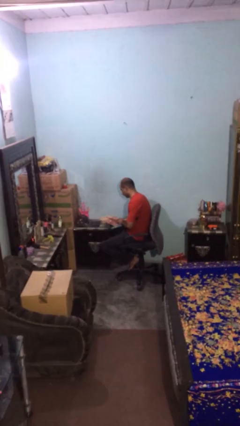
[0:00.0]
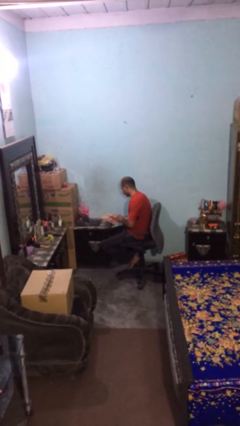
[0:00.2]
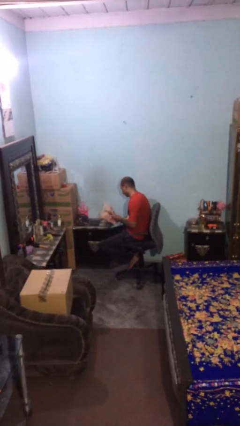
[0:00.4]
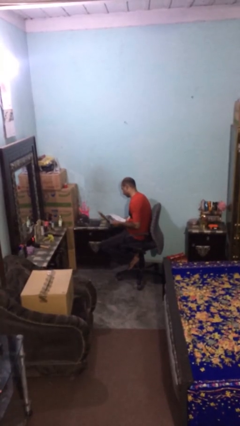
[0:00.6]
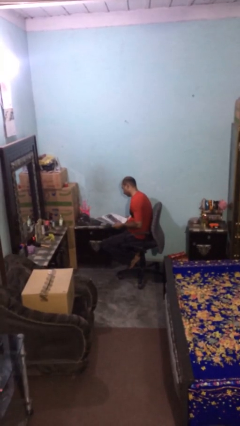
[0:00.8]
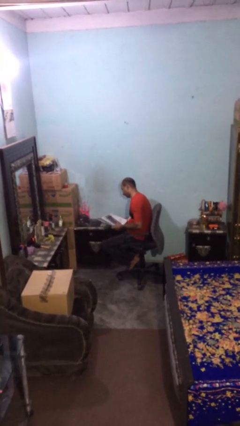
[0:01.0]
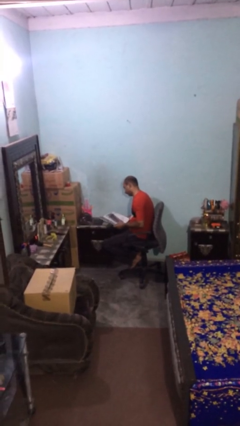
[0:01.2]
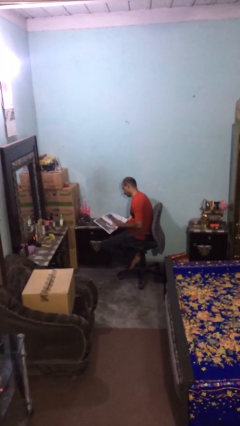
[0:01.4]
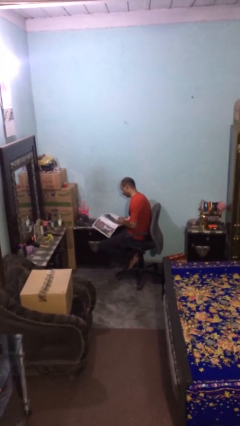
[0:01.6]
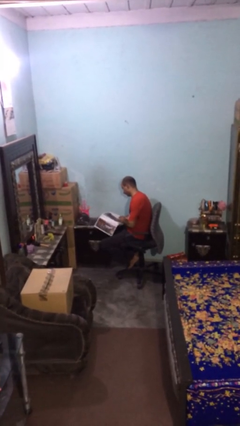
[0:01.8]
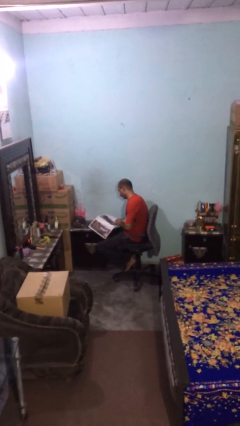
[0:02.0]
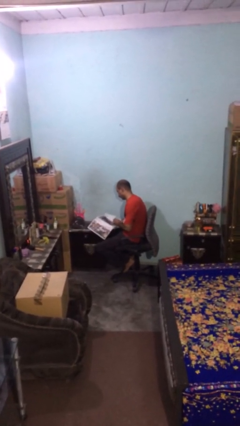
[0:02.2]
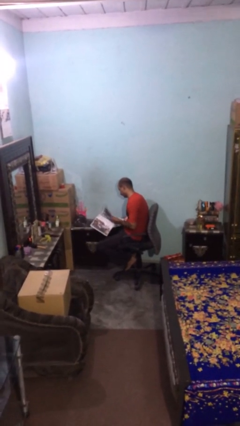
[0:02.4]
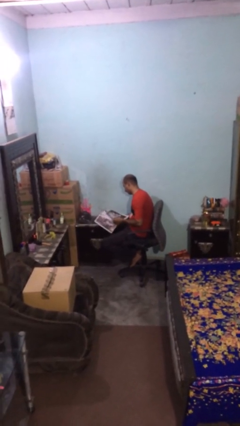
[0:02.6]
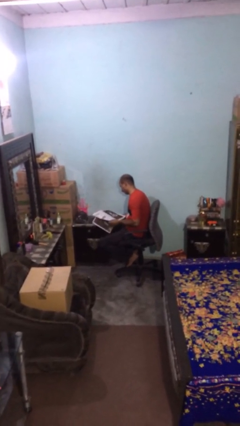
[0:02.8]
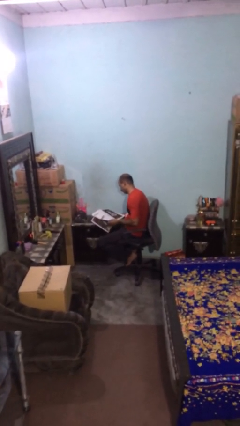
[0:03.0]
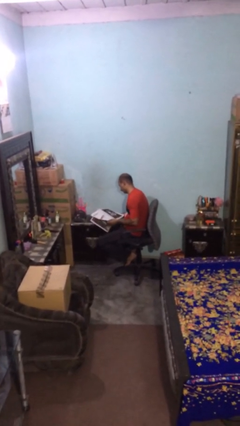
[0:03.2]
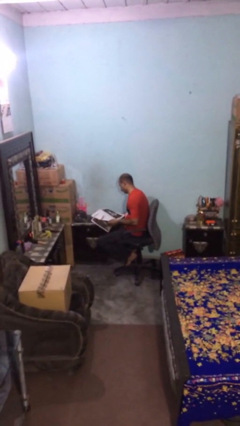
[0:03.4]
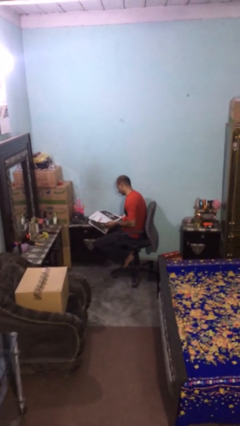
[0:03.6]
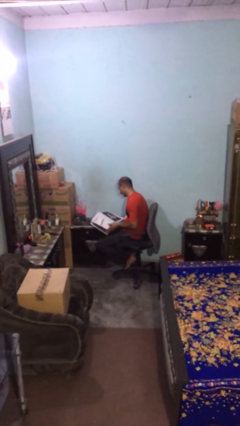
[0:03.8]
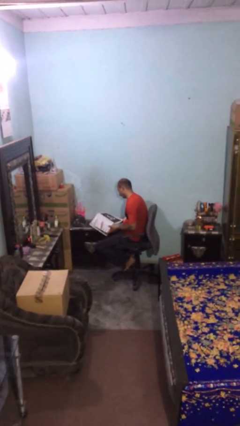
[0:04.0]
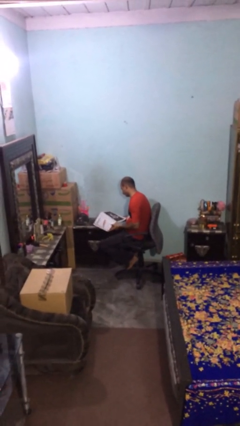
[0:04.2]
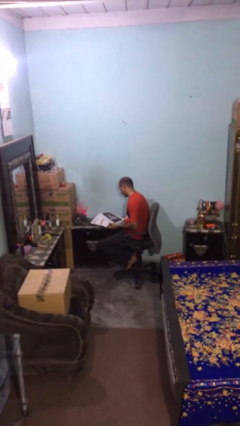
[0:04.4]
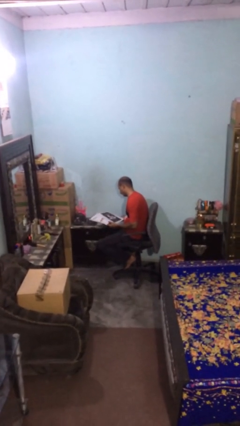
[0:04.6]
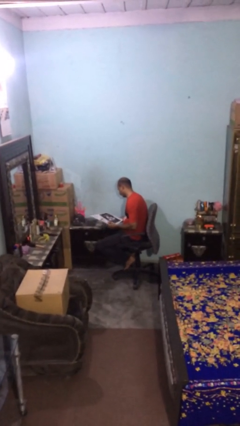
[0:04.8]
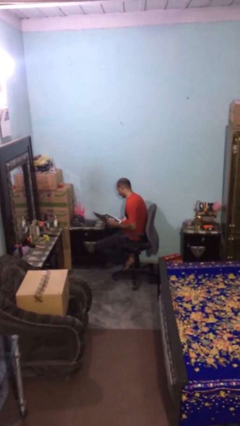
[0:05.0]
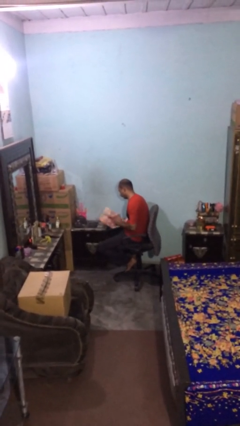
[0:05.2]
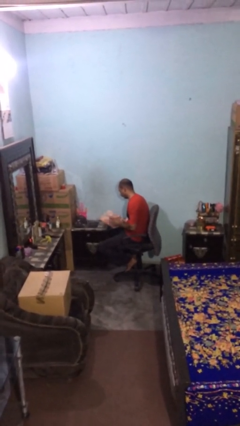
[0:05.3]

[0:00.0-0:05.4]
person reads document

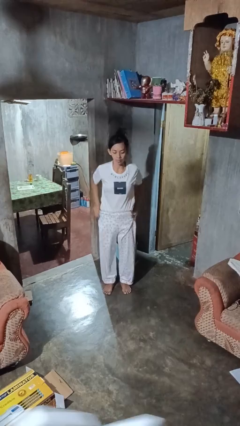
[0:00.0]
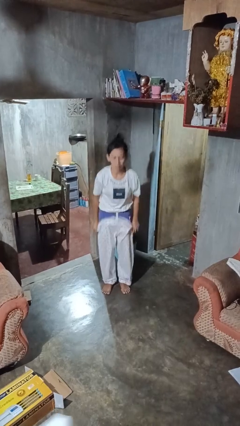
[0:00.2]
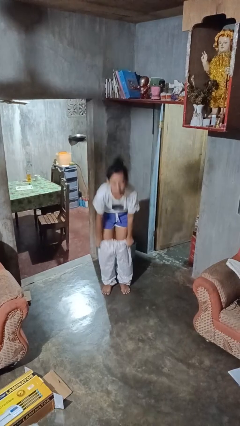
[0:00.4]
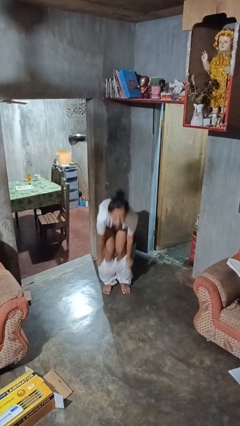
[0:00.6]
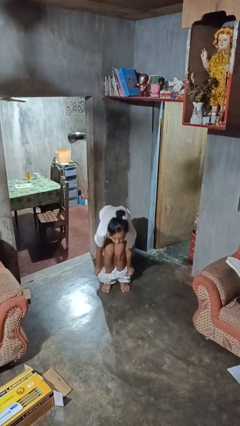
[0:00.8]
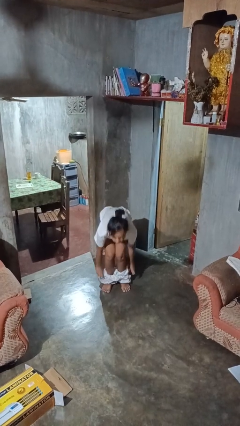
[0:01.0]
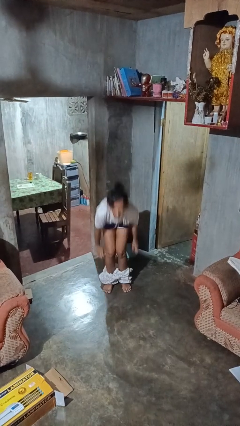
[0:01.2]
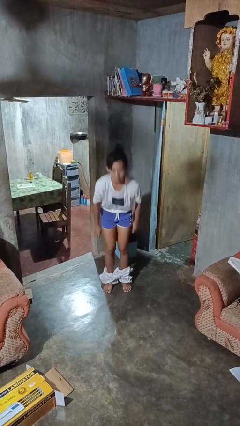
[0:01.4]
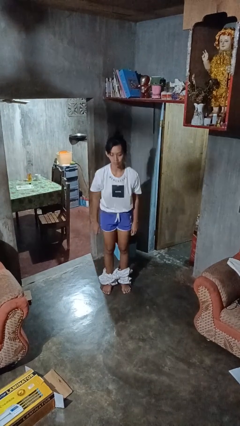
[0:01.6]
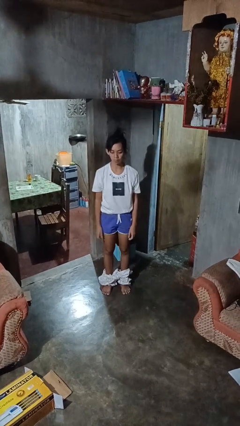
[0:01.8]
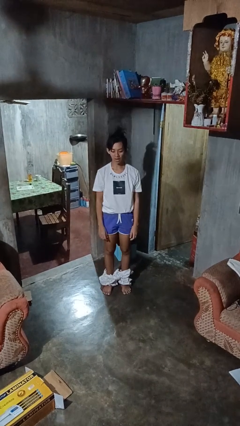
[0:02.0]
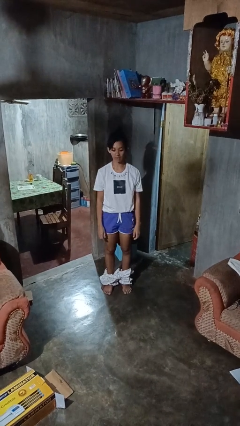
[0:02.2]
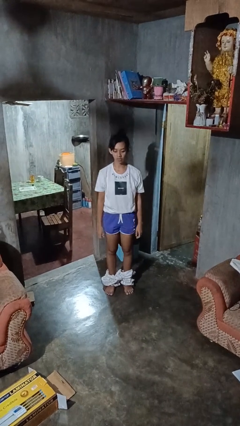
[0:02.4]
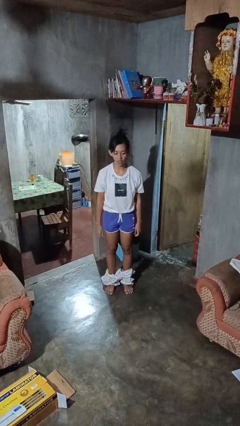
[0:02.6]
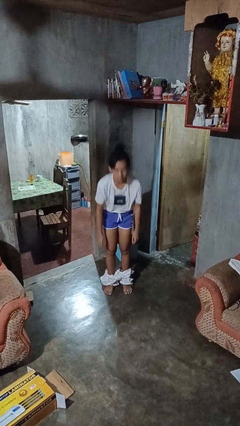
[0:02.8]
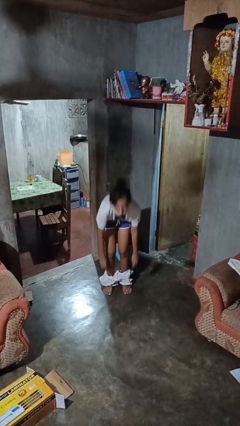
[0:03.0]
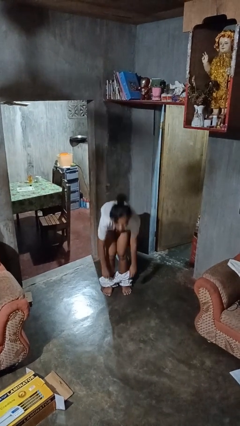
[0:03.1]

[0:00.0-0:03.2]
person takes off pants

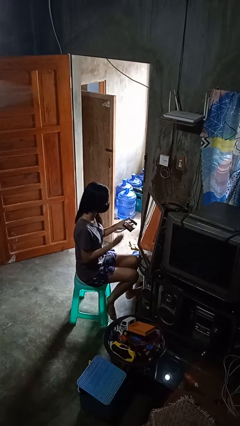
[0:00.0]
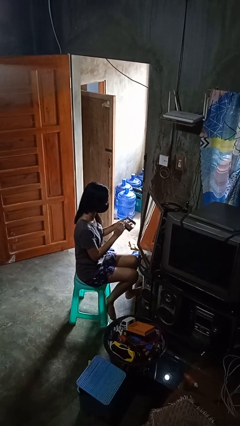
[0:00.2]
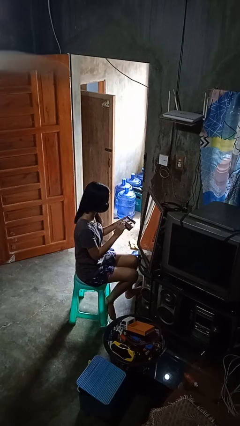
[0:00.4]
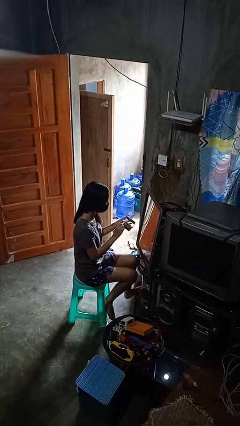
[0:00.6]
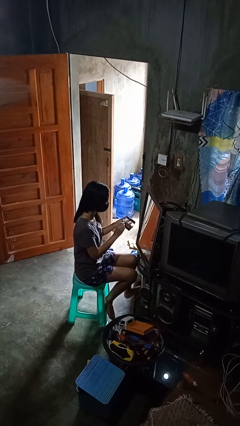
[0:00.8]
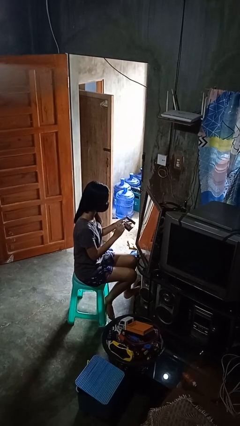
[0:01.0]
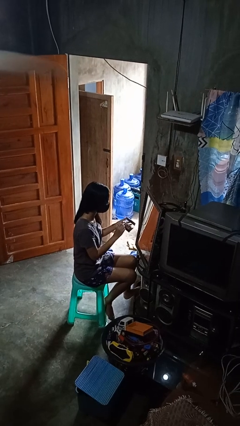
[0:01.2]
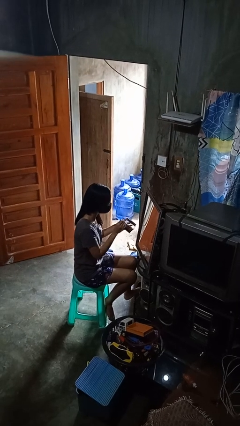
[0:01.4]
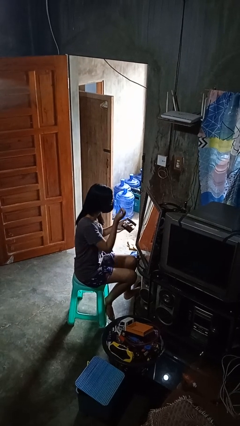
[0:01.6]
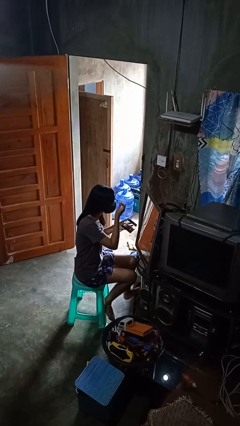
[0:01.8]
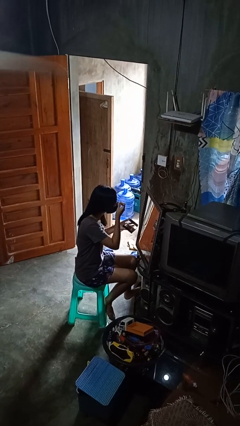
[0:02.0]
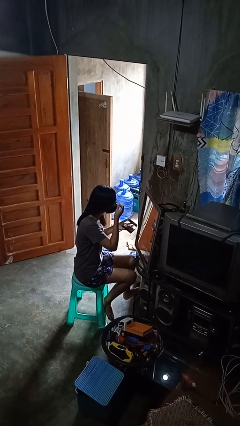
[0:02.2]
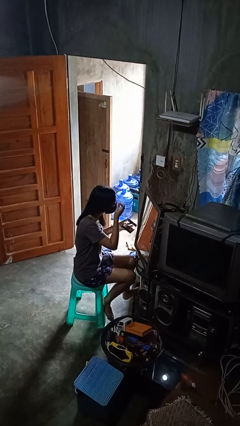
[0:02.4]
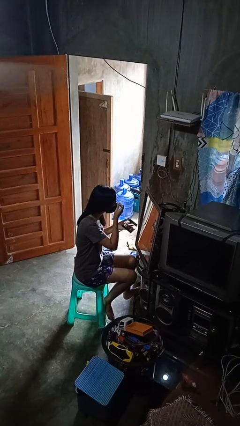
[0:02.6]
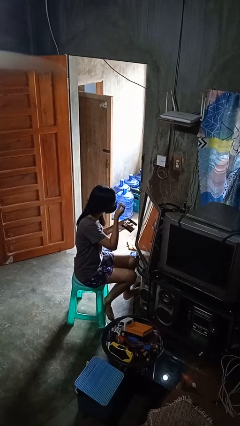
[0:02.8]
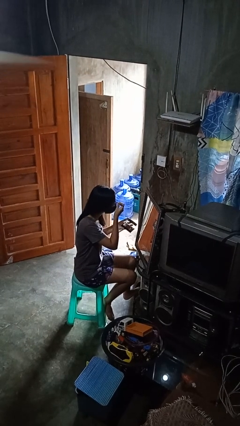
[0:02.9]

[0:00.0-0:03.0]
person applies eye makeup

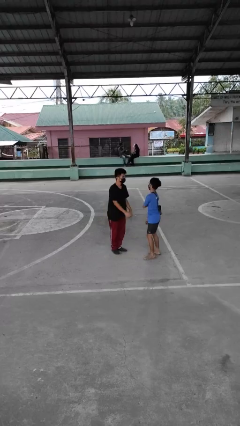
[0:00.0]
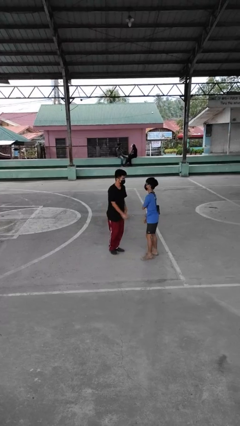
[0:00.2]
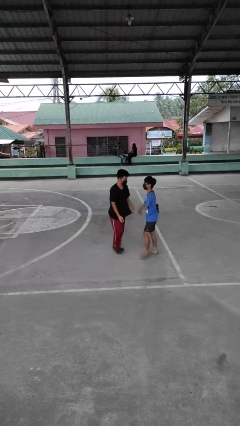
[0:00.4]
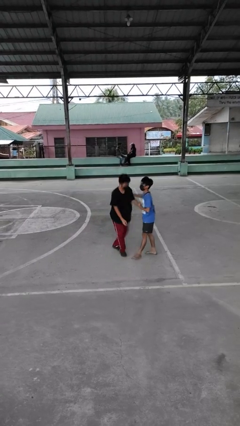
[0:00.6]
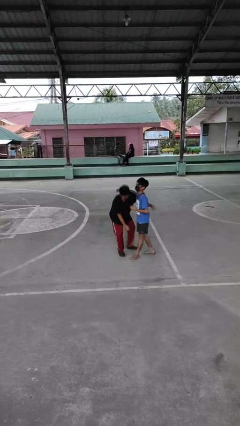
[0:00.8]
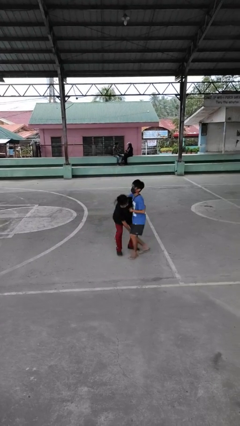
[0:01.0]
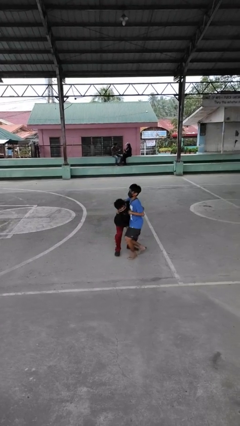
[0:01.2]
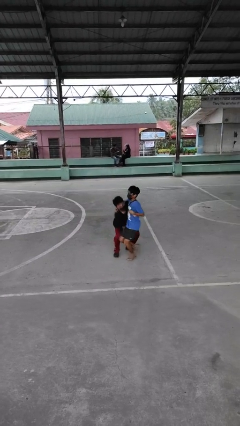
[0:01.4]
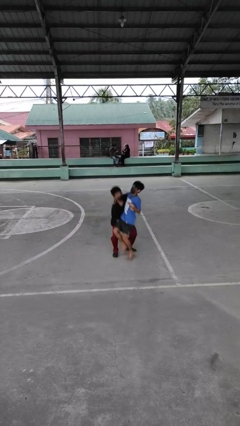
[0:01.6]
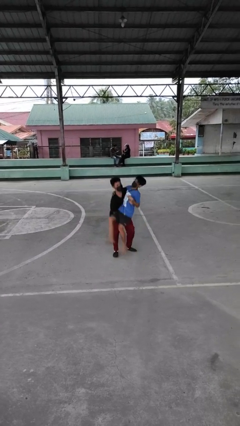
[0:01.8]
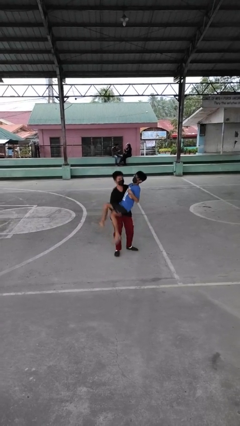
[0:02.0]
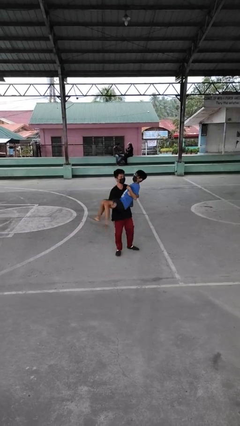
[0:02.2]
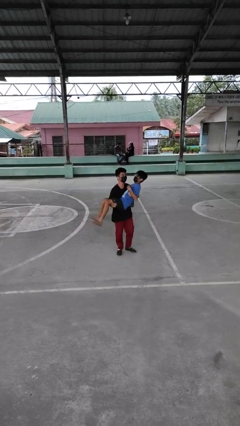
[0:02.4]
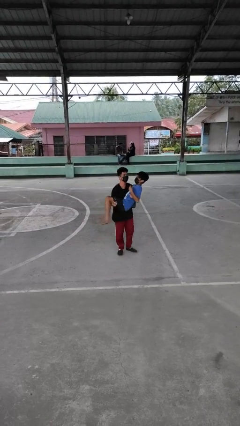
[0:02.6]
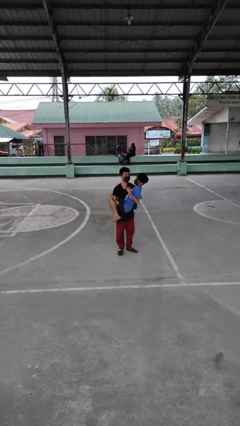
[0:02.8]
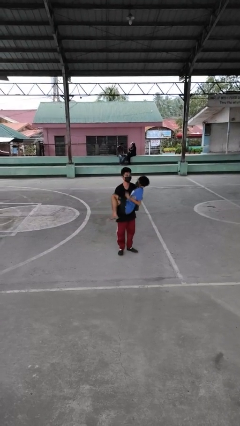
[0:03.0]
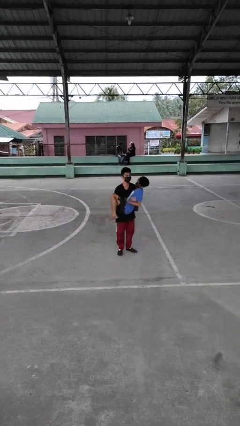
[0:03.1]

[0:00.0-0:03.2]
person picks up person

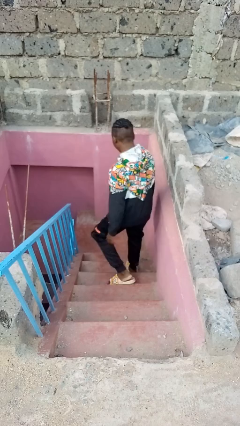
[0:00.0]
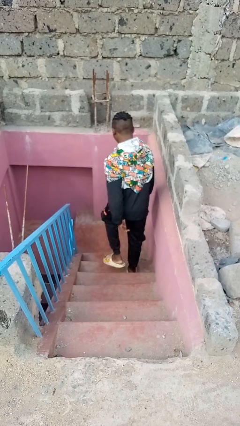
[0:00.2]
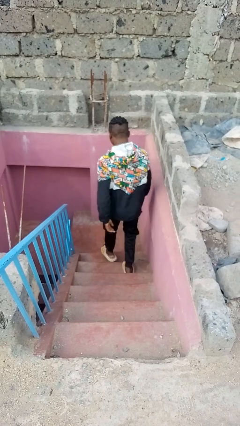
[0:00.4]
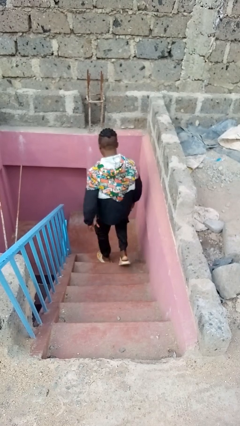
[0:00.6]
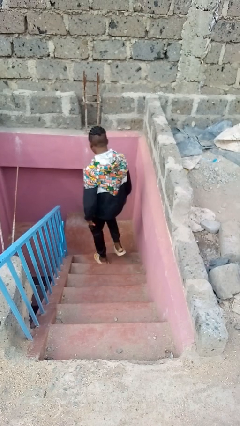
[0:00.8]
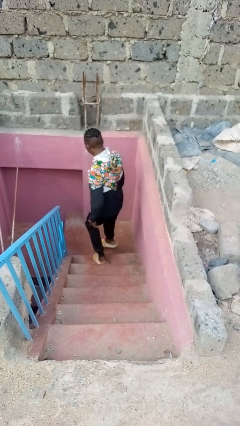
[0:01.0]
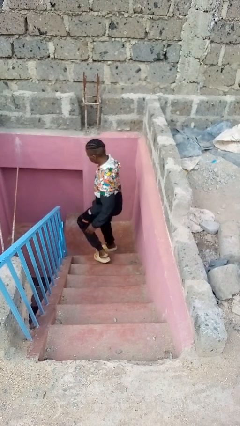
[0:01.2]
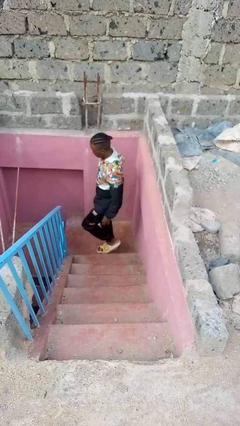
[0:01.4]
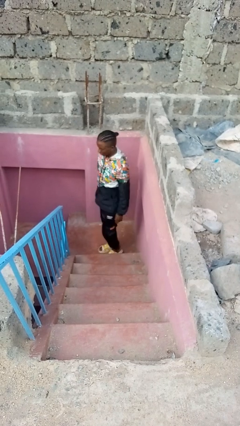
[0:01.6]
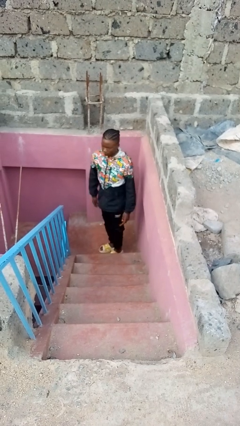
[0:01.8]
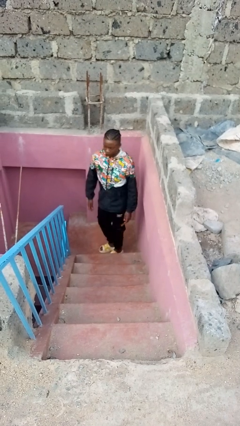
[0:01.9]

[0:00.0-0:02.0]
person climbs down stairs

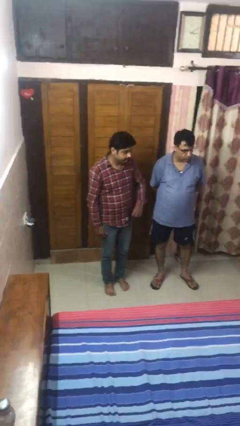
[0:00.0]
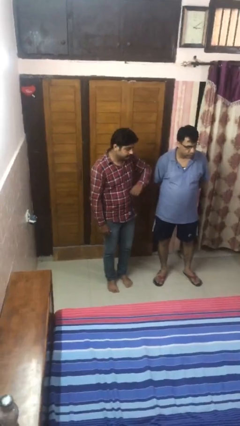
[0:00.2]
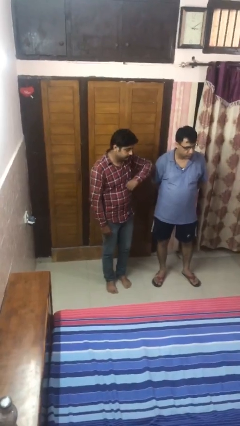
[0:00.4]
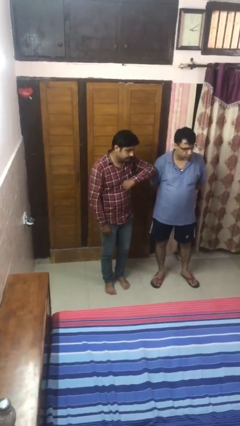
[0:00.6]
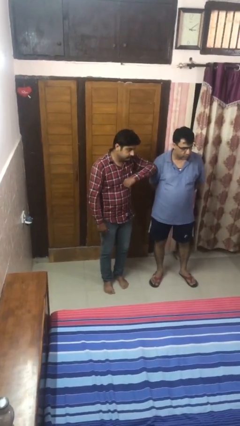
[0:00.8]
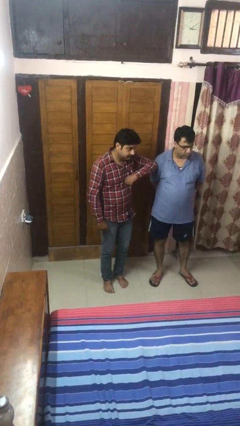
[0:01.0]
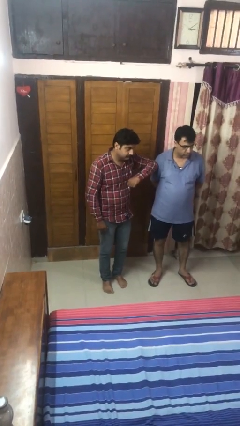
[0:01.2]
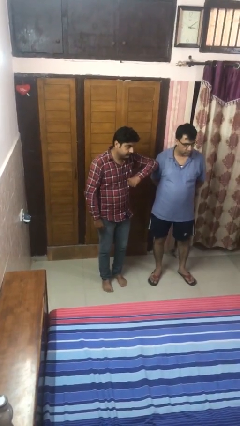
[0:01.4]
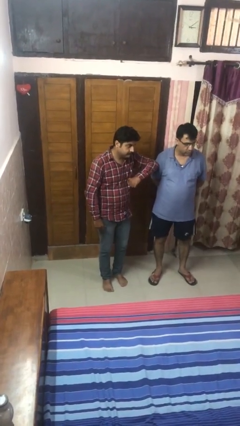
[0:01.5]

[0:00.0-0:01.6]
person nudges person with elbow
